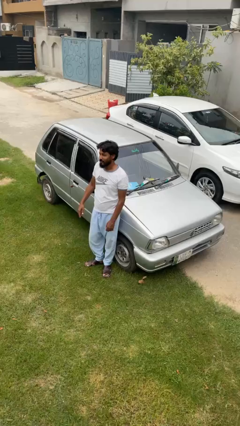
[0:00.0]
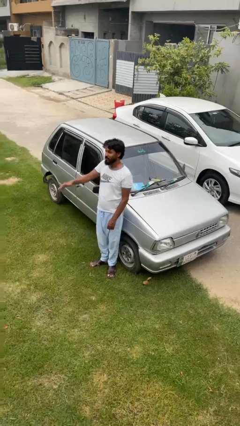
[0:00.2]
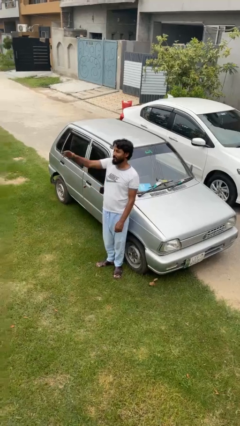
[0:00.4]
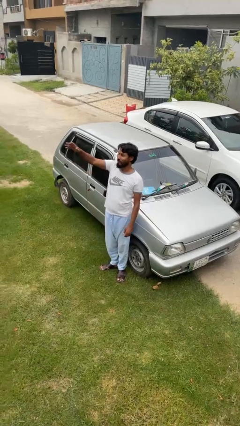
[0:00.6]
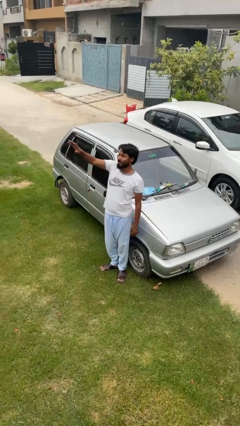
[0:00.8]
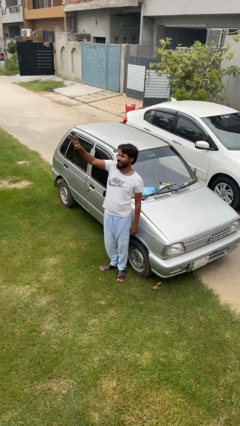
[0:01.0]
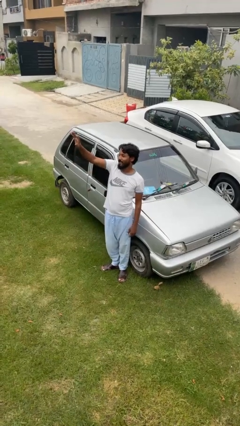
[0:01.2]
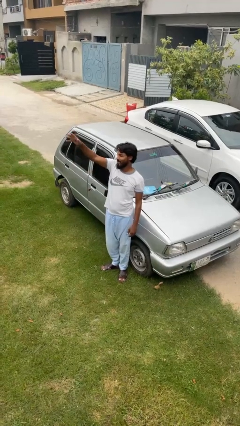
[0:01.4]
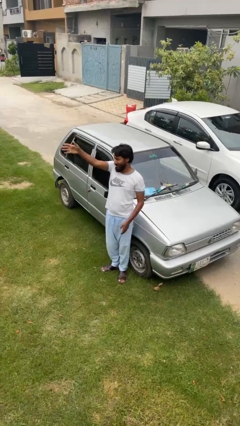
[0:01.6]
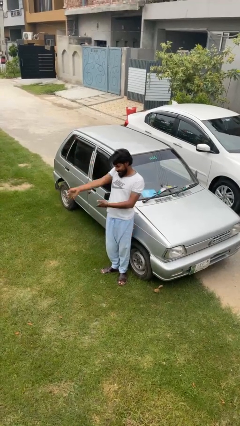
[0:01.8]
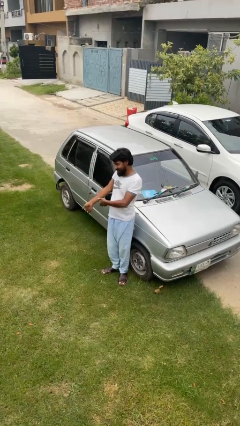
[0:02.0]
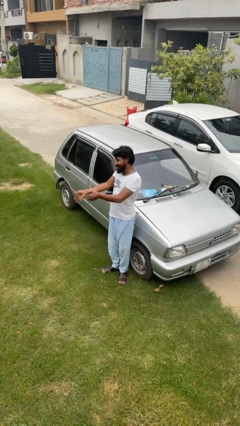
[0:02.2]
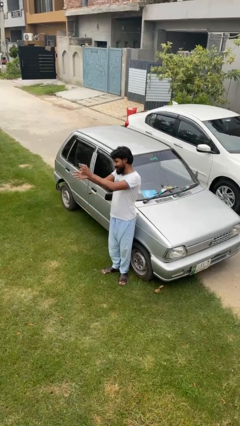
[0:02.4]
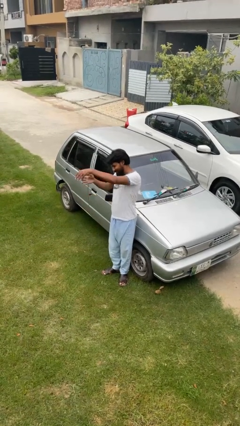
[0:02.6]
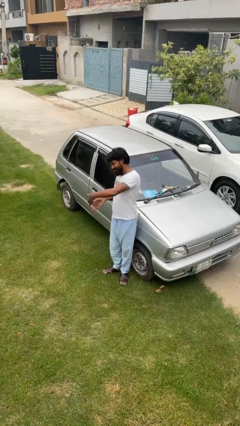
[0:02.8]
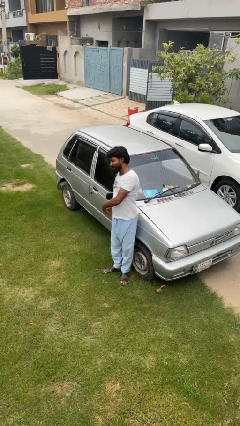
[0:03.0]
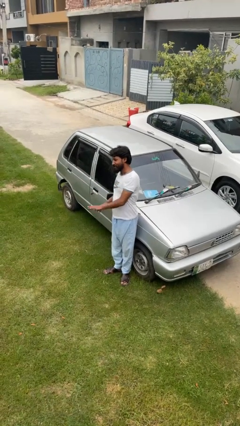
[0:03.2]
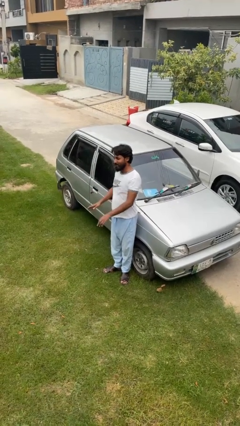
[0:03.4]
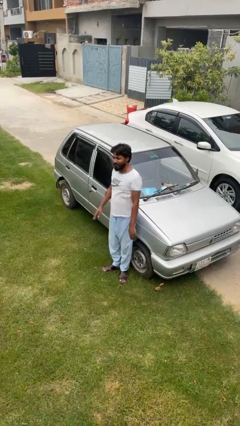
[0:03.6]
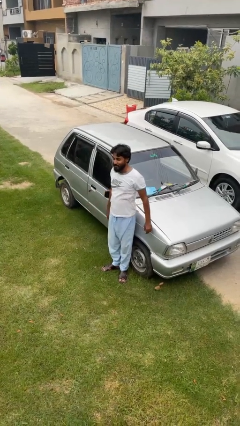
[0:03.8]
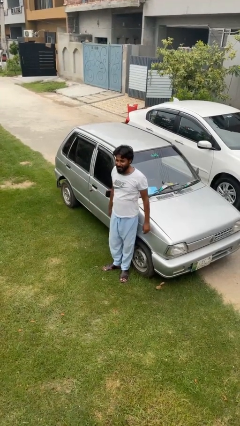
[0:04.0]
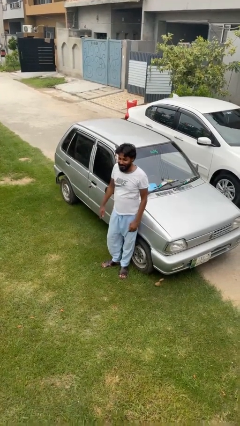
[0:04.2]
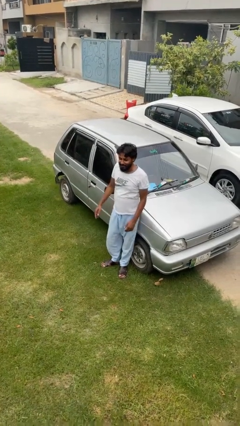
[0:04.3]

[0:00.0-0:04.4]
person gestures come here

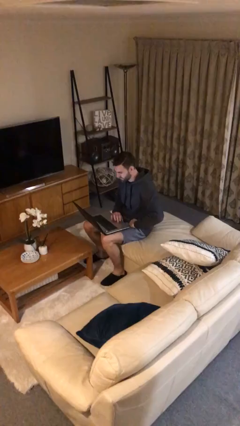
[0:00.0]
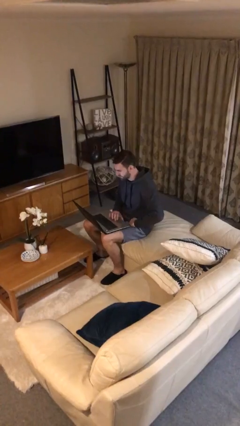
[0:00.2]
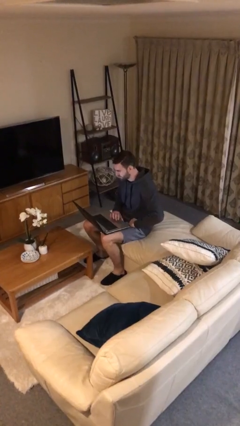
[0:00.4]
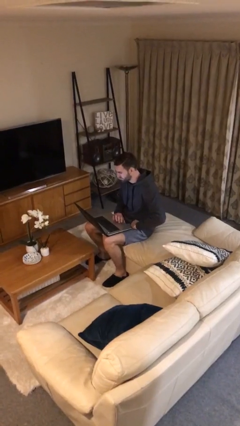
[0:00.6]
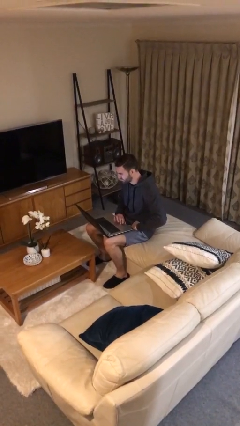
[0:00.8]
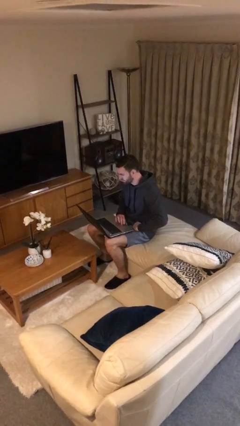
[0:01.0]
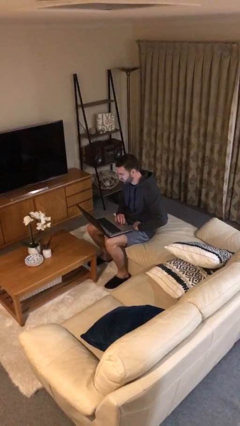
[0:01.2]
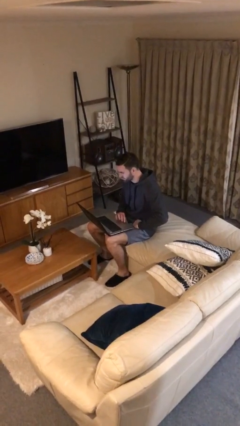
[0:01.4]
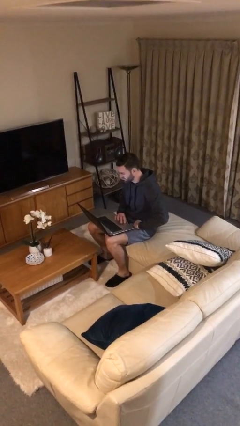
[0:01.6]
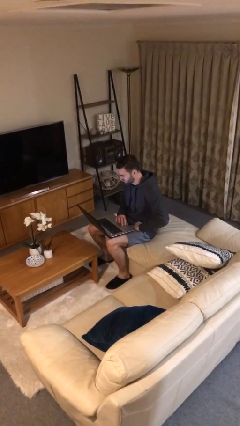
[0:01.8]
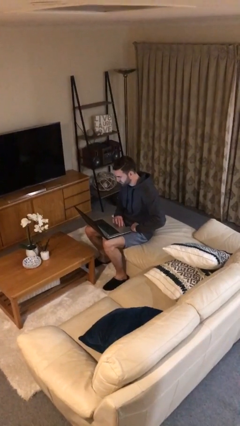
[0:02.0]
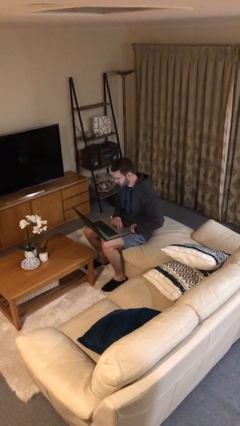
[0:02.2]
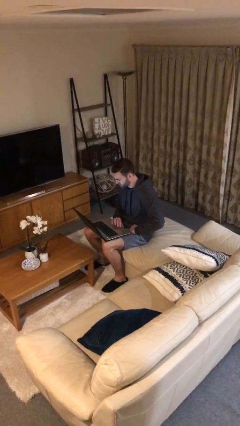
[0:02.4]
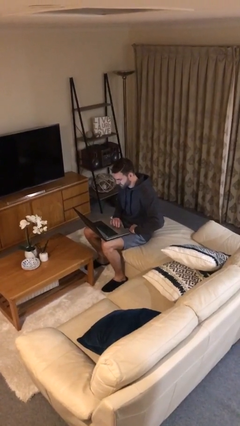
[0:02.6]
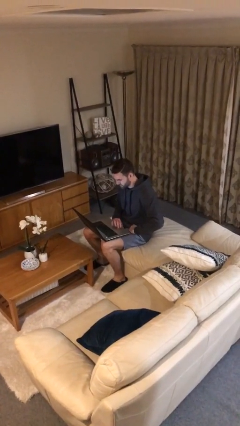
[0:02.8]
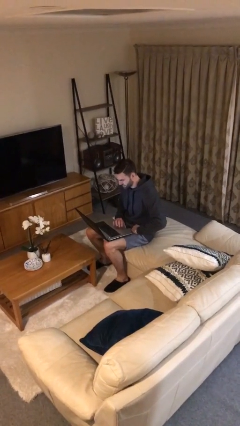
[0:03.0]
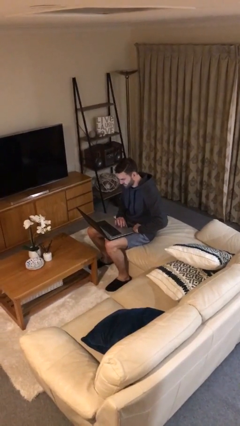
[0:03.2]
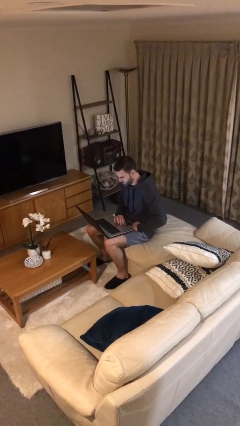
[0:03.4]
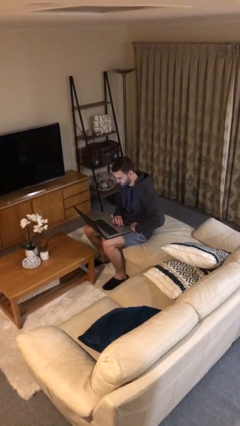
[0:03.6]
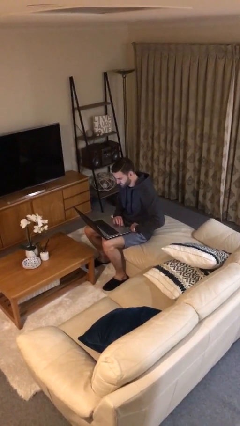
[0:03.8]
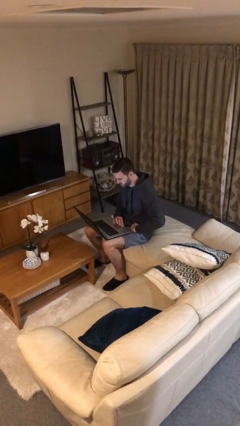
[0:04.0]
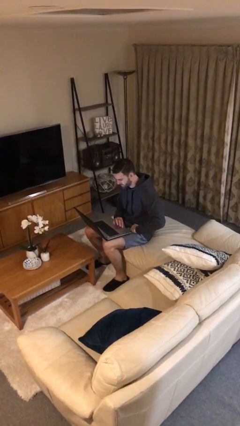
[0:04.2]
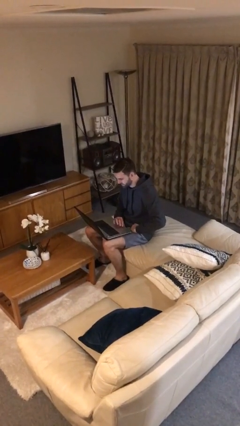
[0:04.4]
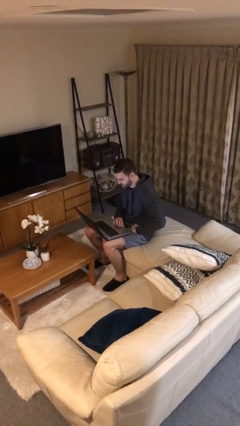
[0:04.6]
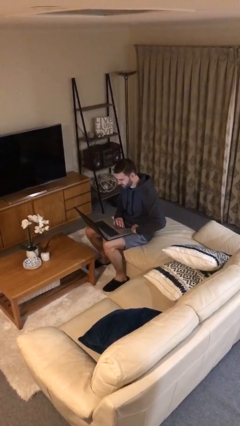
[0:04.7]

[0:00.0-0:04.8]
person interacts with laptop

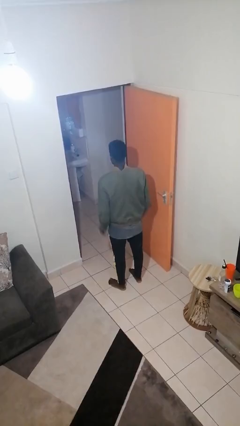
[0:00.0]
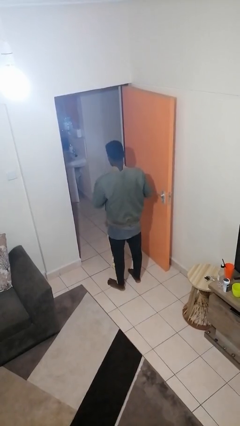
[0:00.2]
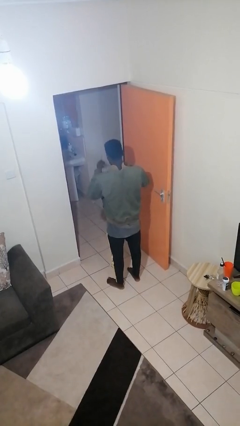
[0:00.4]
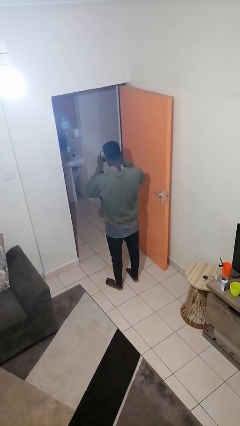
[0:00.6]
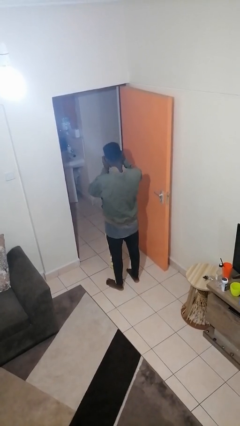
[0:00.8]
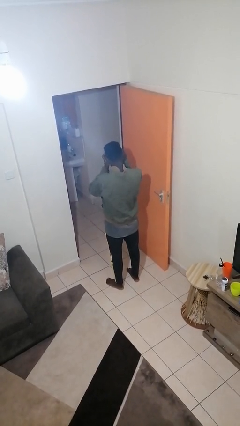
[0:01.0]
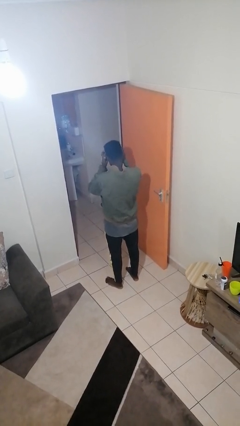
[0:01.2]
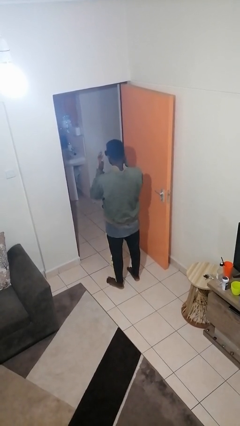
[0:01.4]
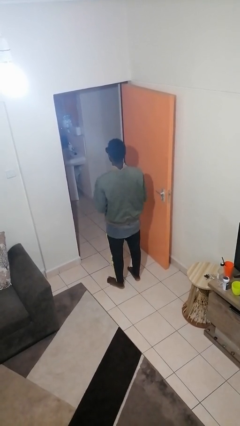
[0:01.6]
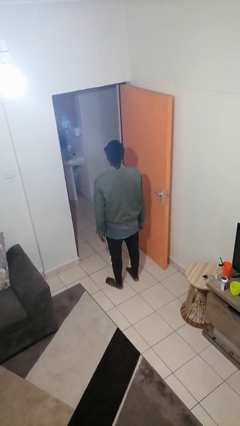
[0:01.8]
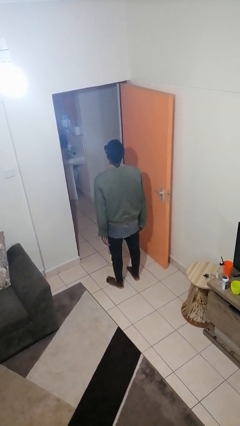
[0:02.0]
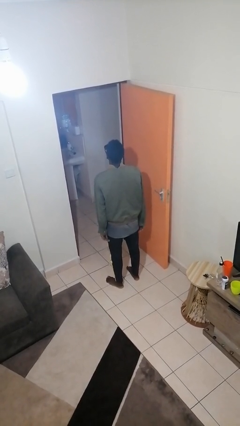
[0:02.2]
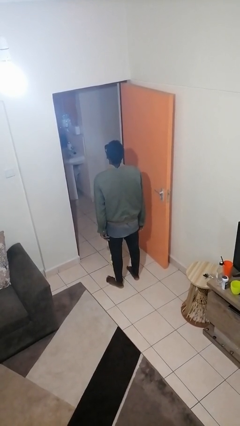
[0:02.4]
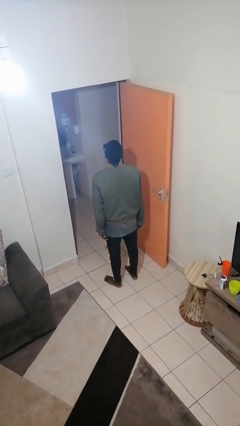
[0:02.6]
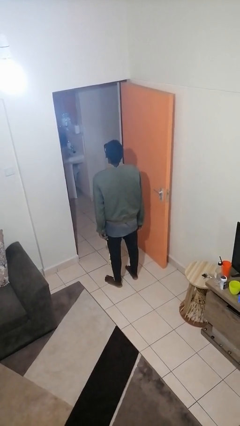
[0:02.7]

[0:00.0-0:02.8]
person puts on sunglasses

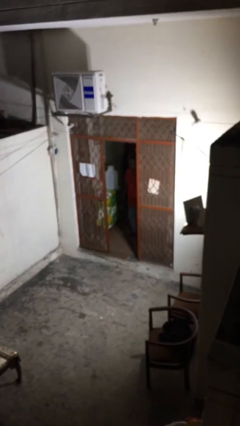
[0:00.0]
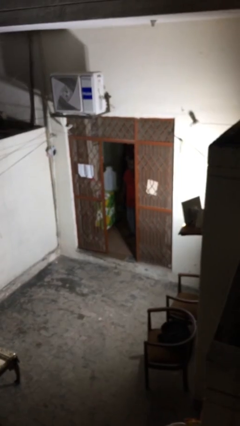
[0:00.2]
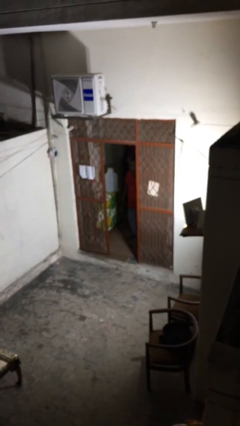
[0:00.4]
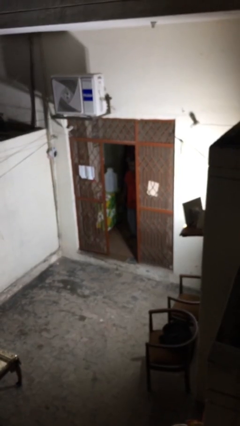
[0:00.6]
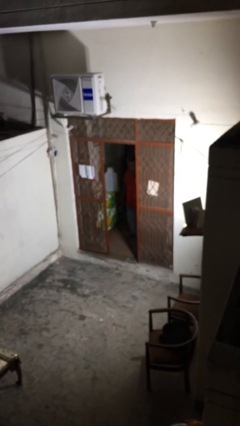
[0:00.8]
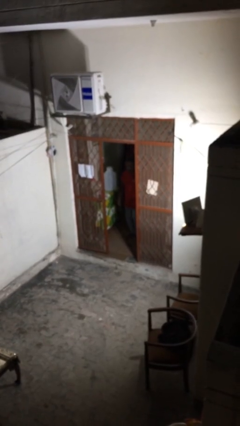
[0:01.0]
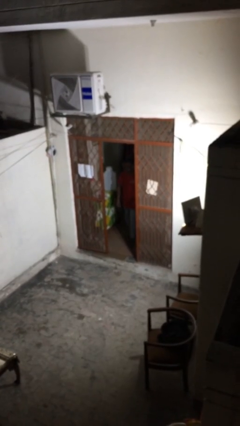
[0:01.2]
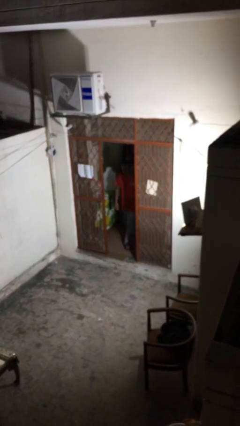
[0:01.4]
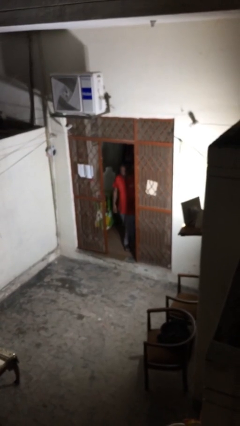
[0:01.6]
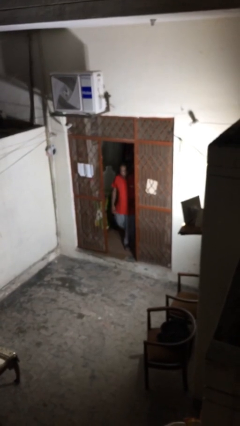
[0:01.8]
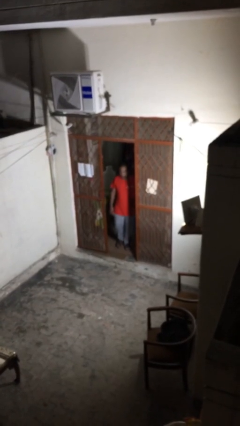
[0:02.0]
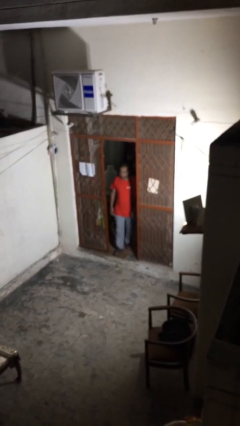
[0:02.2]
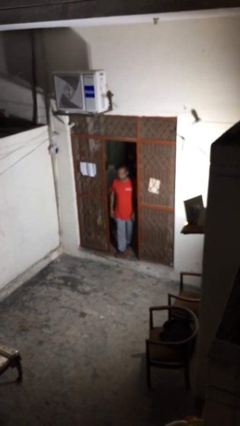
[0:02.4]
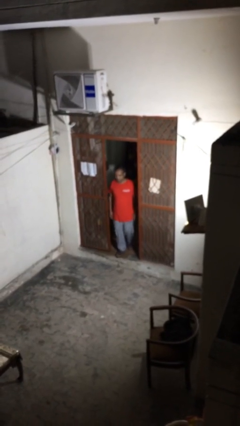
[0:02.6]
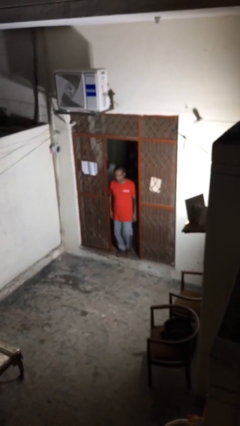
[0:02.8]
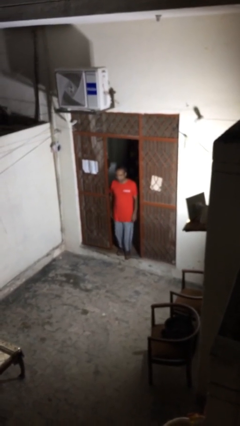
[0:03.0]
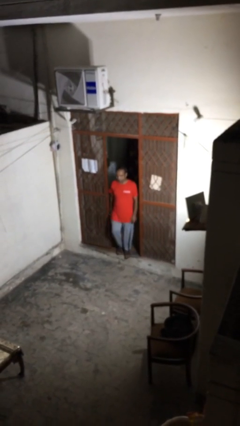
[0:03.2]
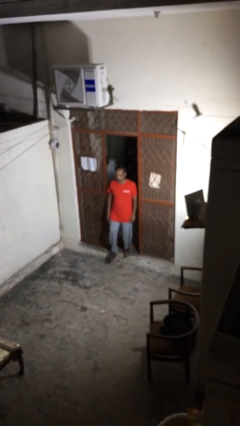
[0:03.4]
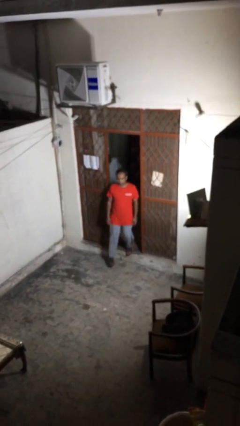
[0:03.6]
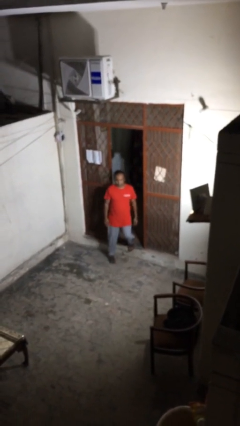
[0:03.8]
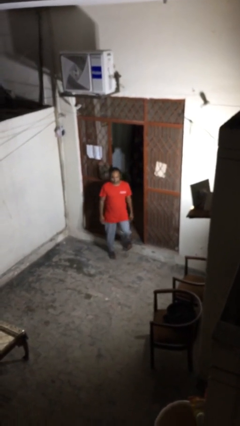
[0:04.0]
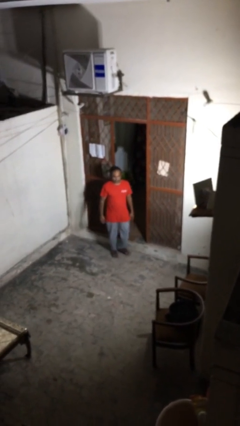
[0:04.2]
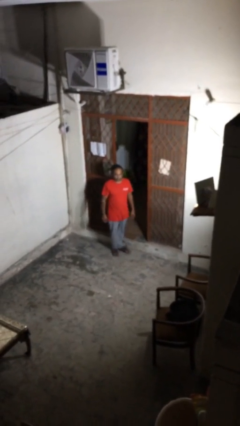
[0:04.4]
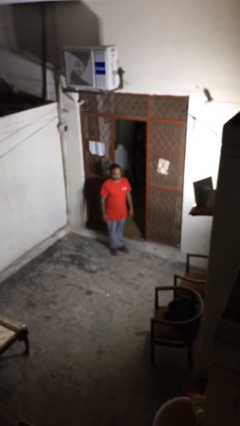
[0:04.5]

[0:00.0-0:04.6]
person enters scene through structure

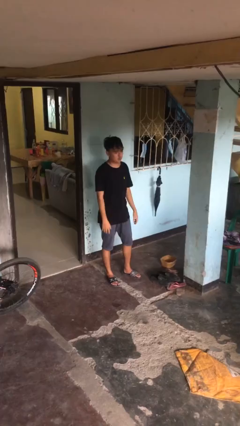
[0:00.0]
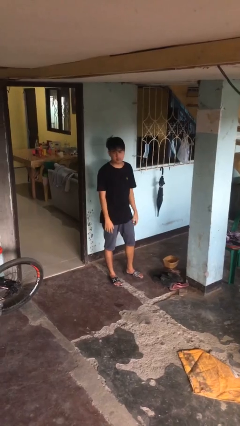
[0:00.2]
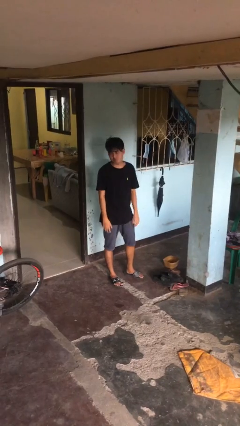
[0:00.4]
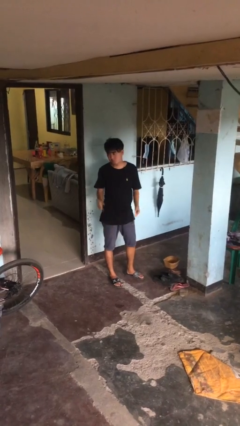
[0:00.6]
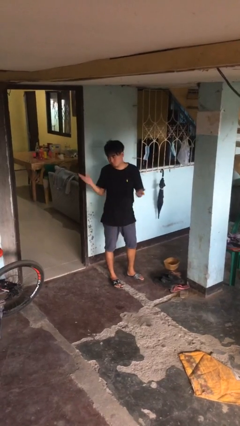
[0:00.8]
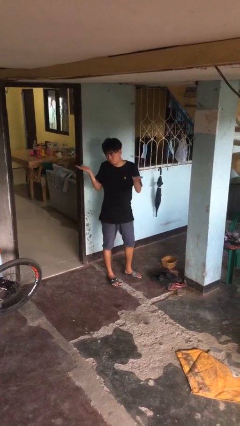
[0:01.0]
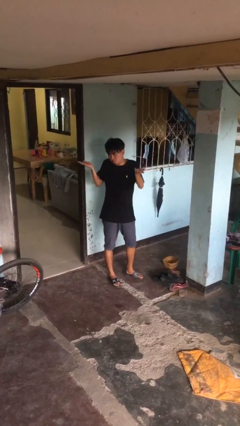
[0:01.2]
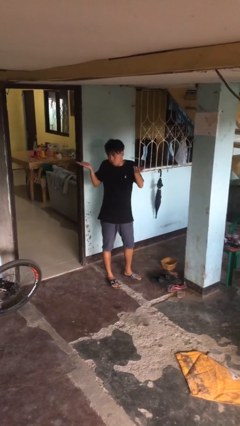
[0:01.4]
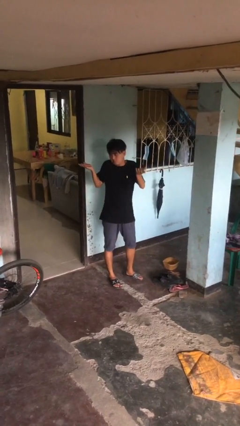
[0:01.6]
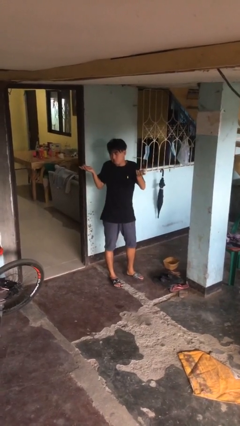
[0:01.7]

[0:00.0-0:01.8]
person shrugs
